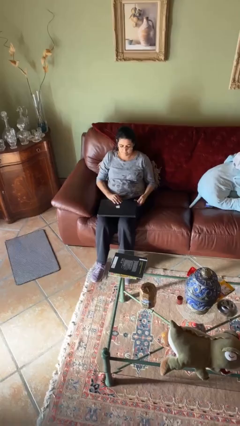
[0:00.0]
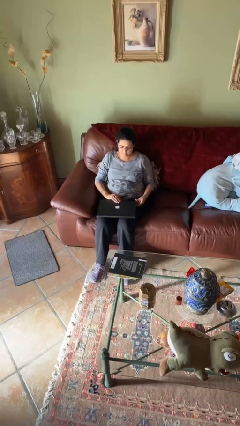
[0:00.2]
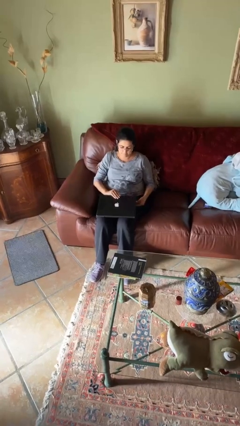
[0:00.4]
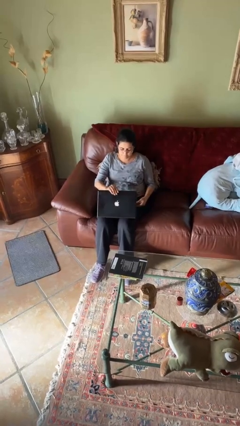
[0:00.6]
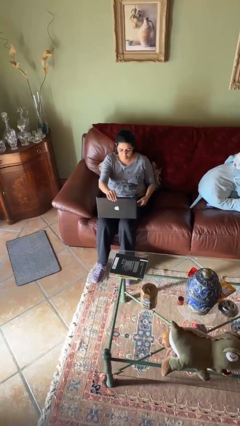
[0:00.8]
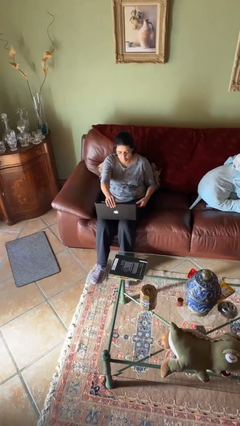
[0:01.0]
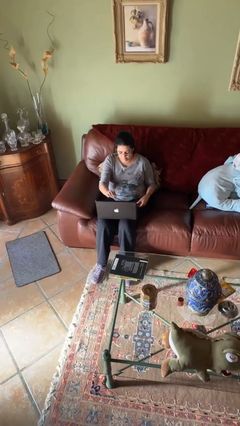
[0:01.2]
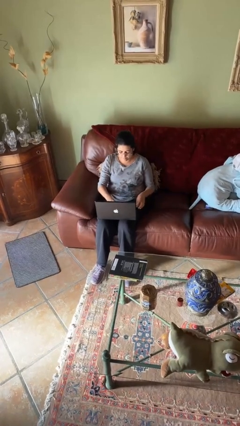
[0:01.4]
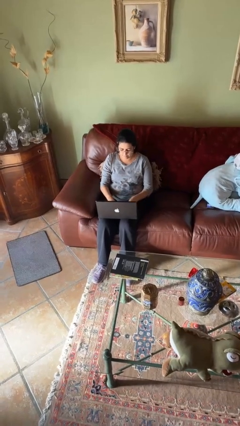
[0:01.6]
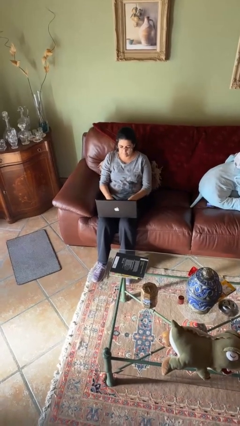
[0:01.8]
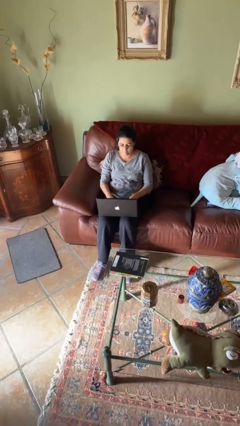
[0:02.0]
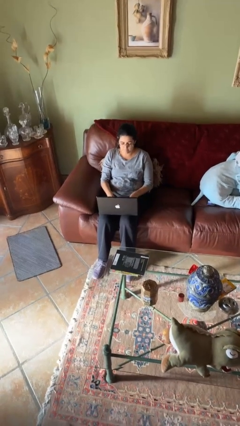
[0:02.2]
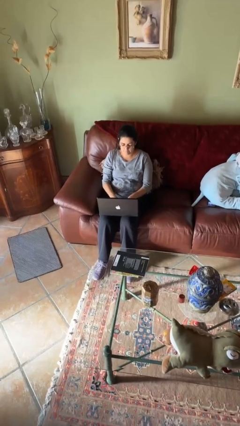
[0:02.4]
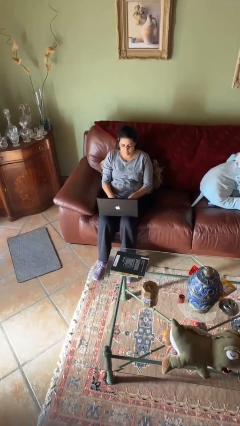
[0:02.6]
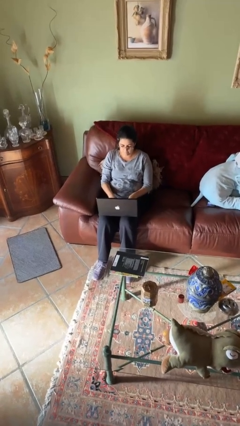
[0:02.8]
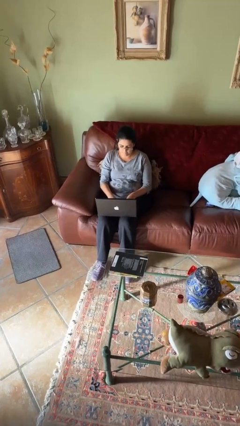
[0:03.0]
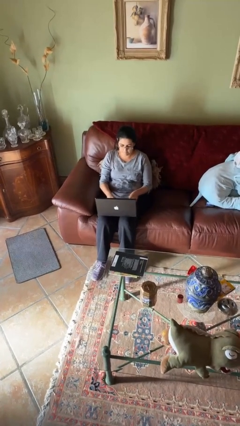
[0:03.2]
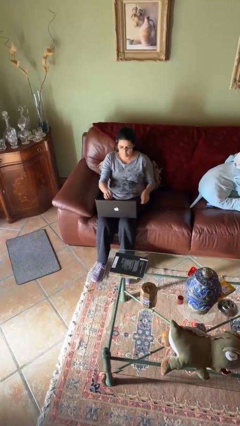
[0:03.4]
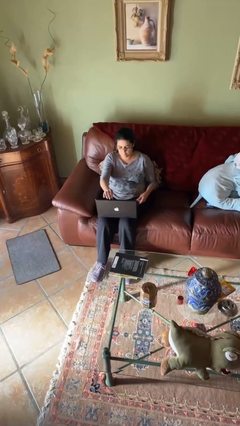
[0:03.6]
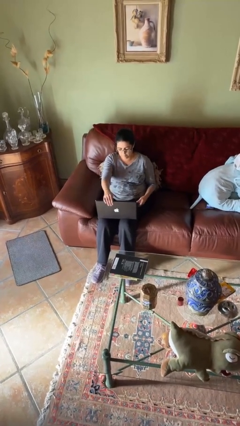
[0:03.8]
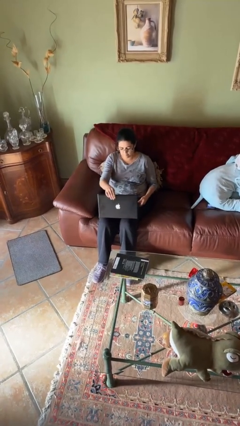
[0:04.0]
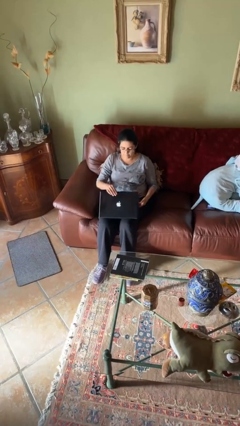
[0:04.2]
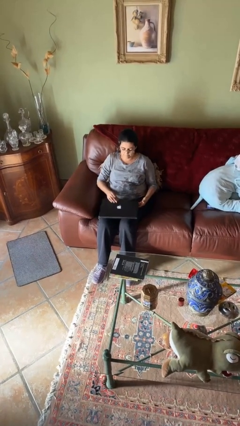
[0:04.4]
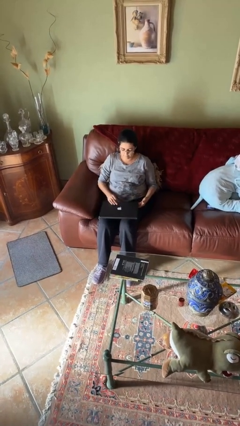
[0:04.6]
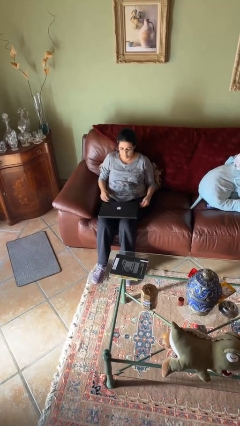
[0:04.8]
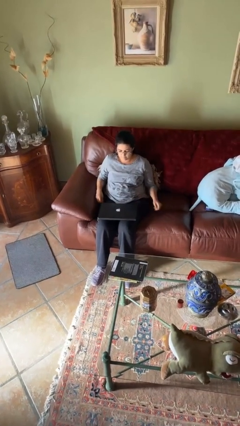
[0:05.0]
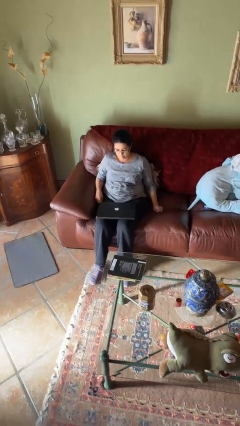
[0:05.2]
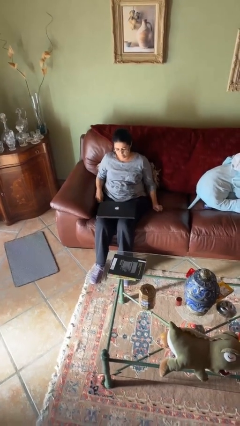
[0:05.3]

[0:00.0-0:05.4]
person interacts with laptop

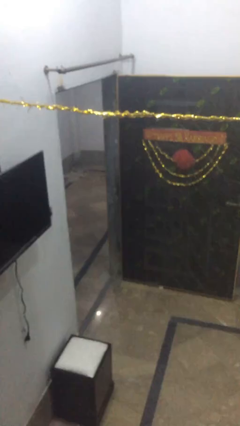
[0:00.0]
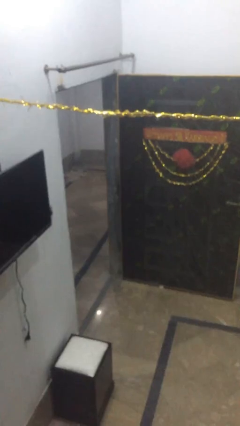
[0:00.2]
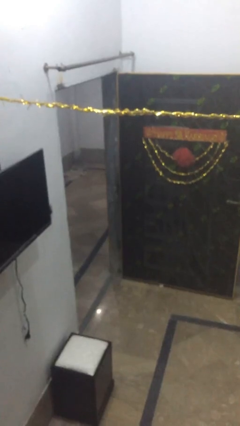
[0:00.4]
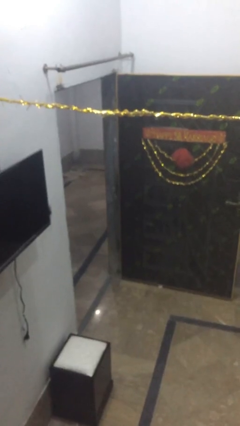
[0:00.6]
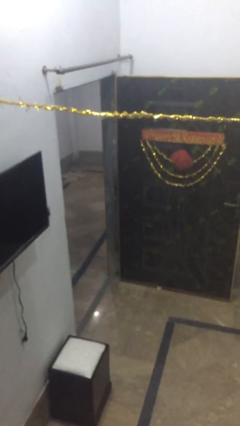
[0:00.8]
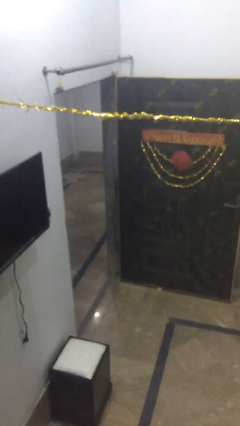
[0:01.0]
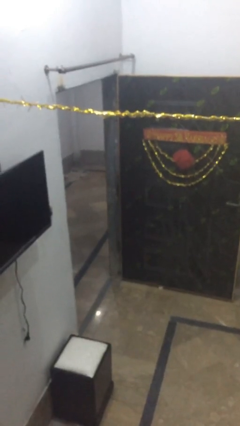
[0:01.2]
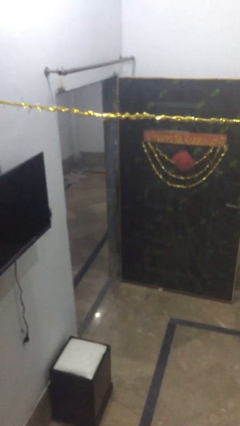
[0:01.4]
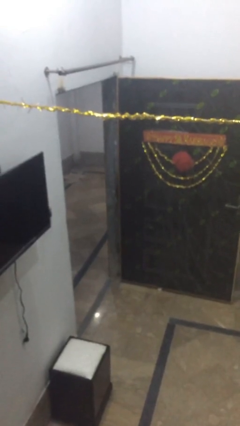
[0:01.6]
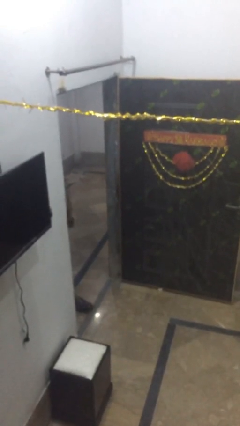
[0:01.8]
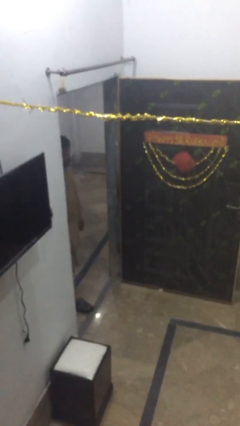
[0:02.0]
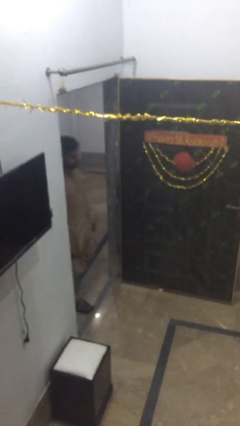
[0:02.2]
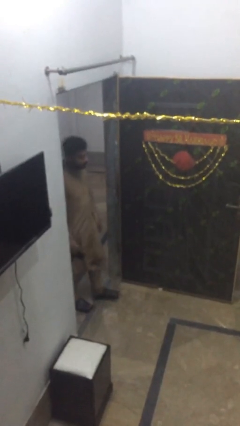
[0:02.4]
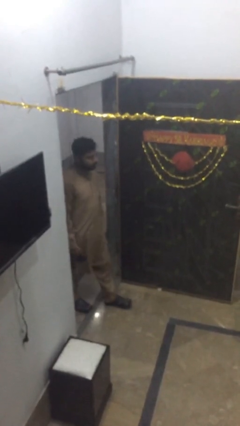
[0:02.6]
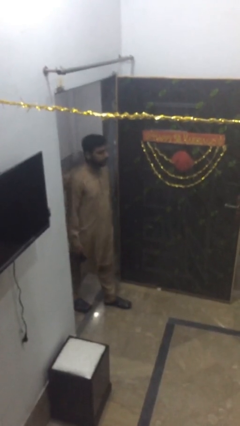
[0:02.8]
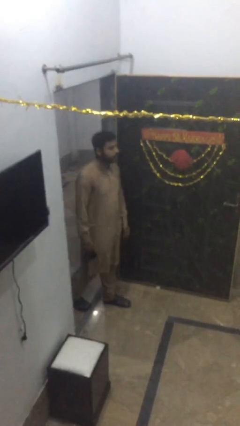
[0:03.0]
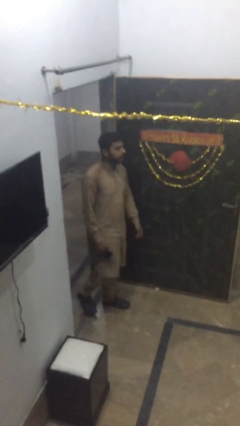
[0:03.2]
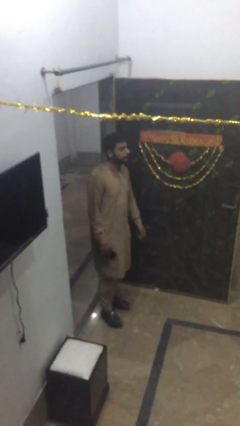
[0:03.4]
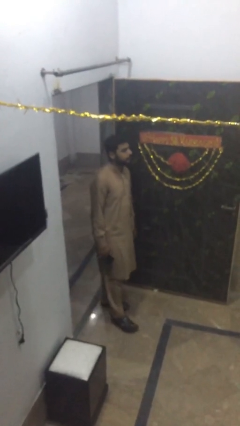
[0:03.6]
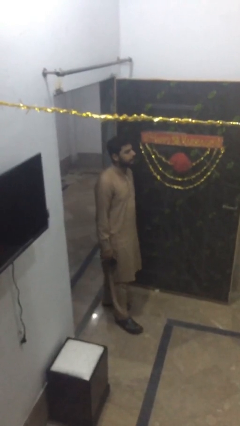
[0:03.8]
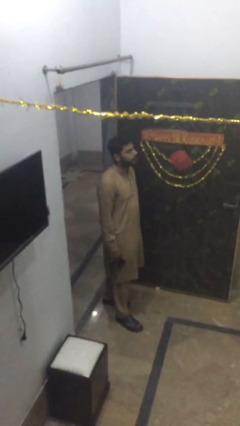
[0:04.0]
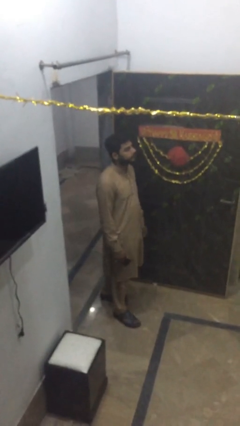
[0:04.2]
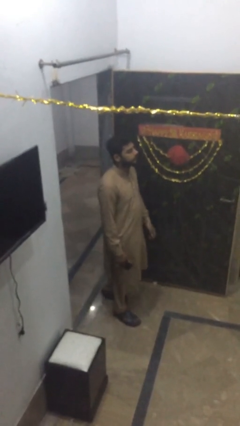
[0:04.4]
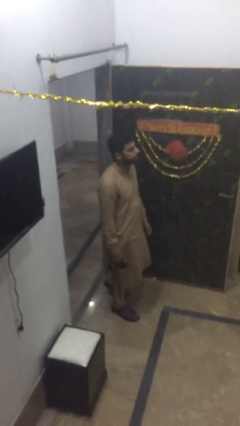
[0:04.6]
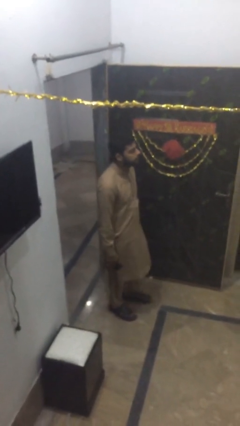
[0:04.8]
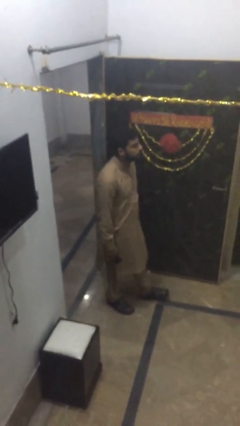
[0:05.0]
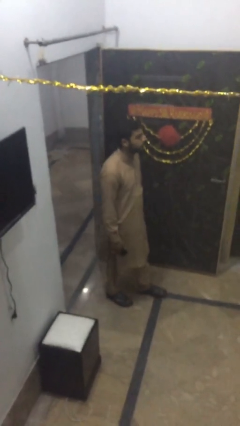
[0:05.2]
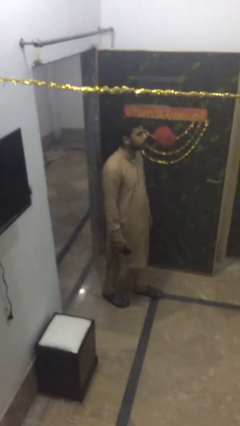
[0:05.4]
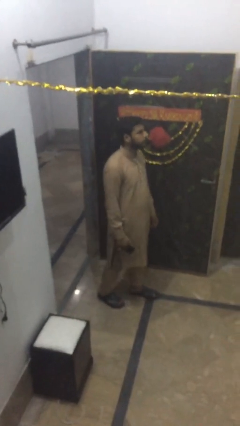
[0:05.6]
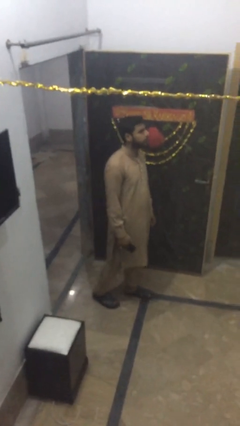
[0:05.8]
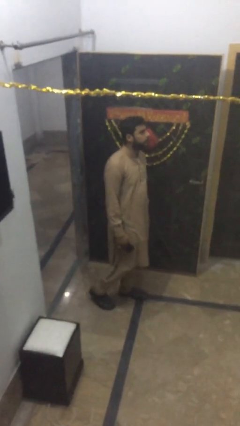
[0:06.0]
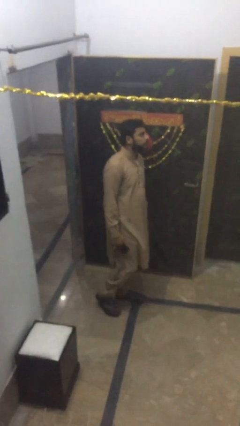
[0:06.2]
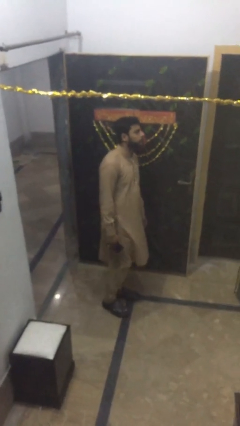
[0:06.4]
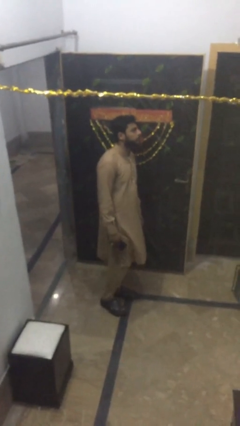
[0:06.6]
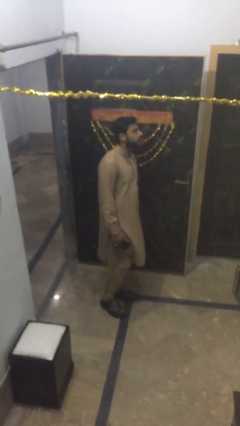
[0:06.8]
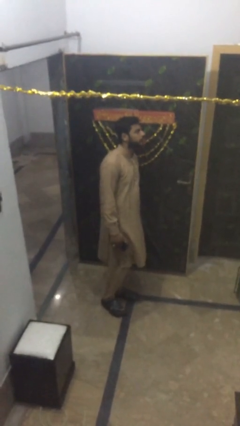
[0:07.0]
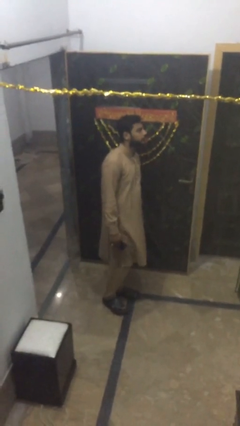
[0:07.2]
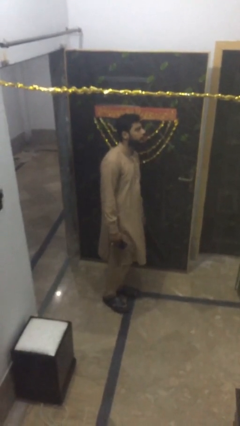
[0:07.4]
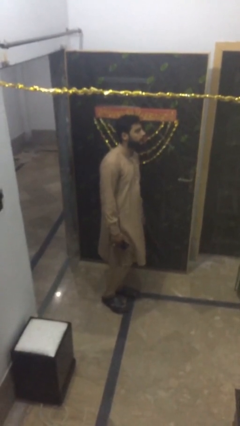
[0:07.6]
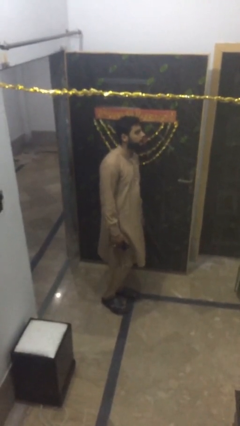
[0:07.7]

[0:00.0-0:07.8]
person enters scene through structure

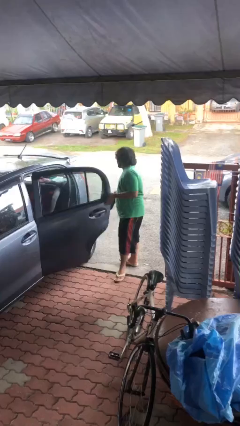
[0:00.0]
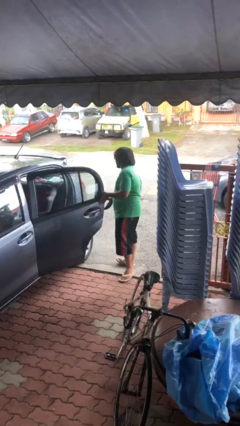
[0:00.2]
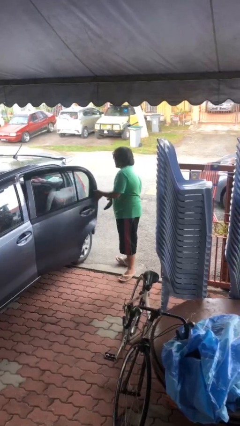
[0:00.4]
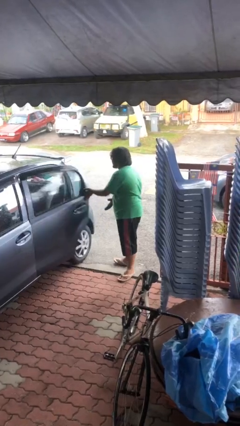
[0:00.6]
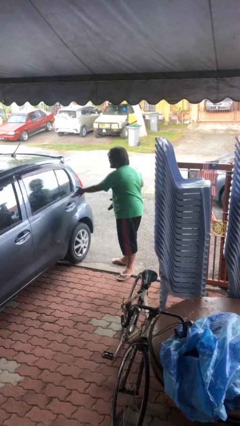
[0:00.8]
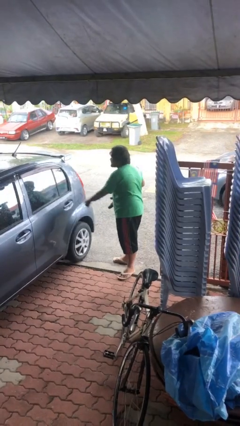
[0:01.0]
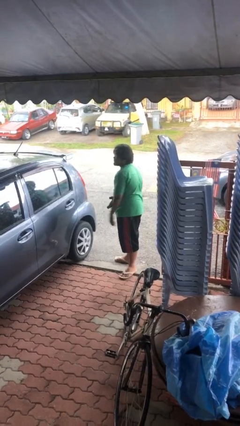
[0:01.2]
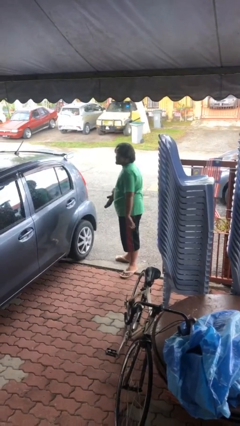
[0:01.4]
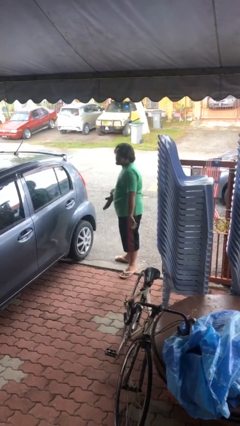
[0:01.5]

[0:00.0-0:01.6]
person closes car door

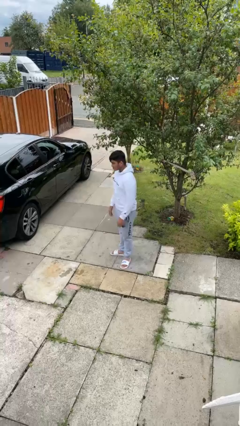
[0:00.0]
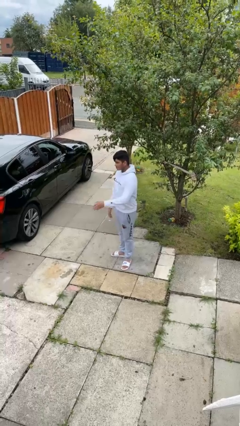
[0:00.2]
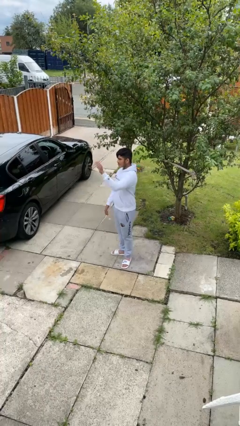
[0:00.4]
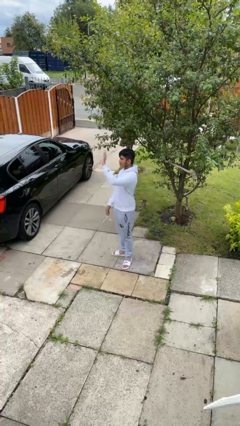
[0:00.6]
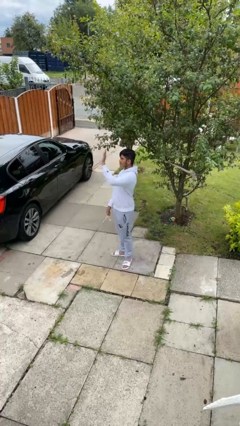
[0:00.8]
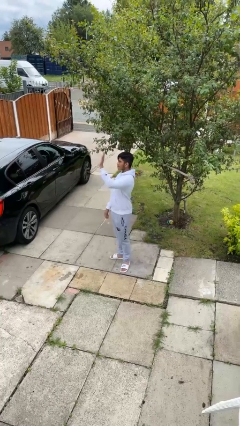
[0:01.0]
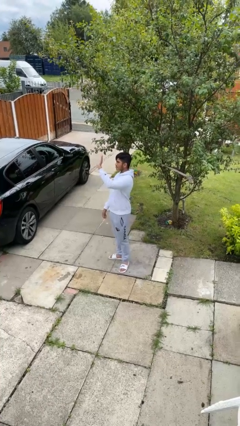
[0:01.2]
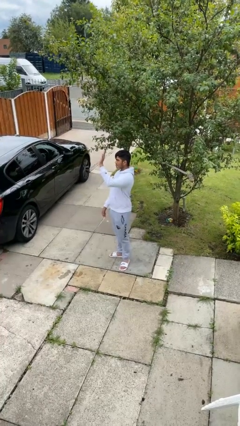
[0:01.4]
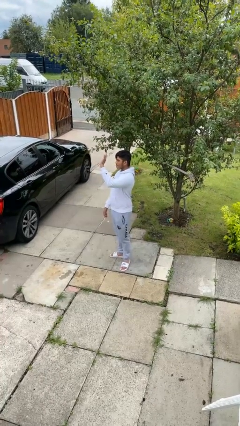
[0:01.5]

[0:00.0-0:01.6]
person waves at person

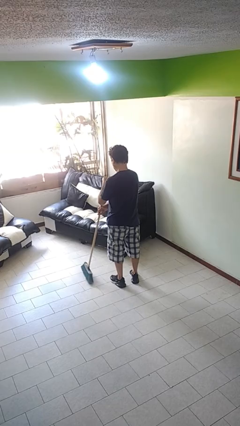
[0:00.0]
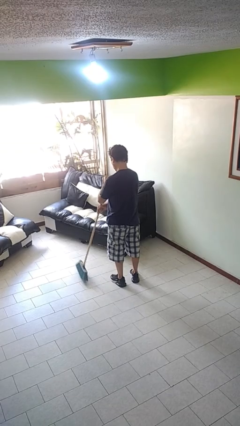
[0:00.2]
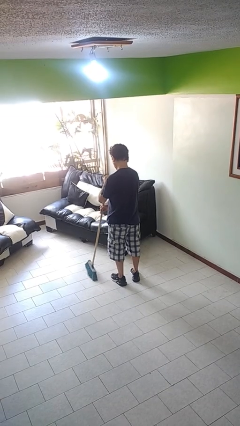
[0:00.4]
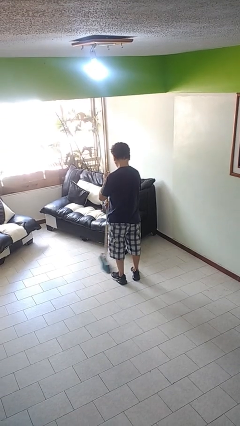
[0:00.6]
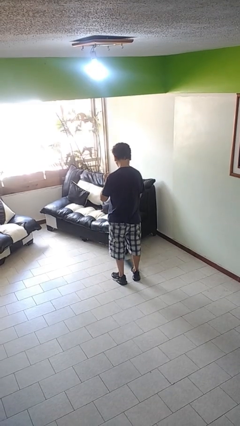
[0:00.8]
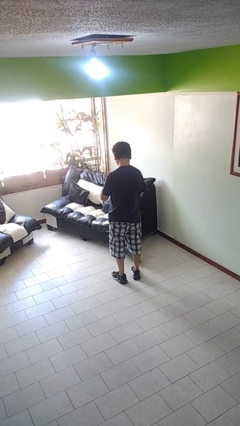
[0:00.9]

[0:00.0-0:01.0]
person sweeps floor
